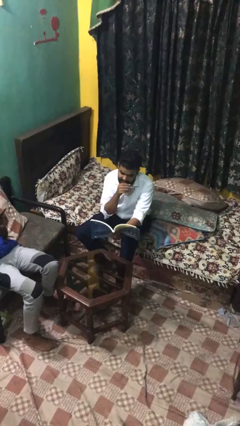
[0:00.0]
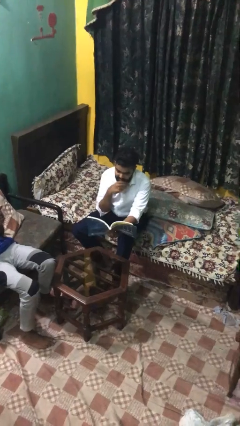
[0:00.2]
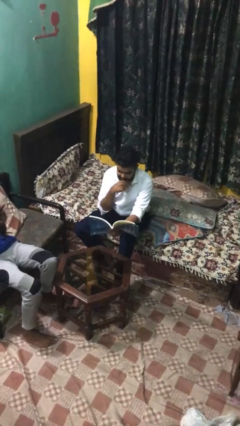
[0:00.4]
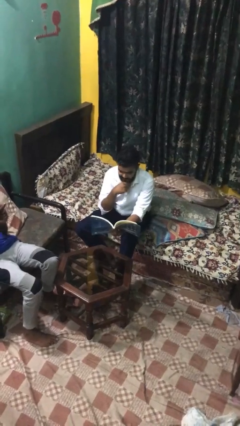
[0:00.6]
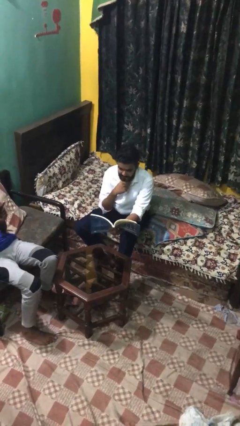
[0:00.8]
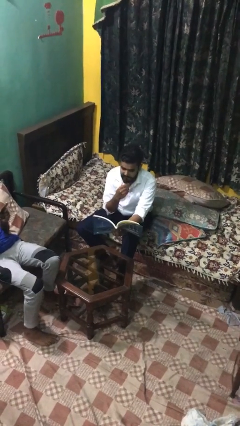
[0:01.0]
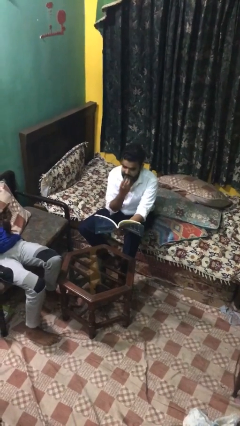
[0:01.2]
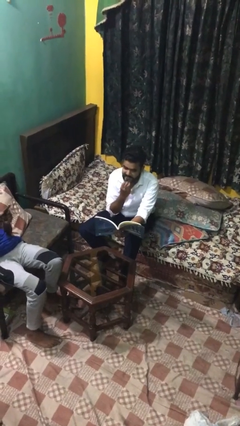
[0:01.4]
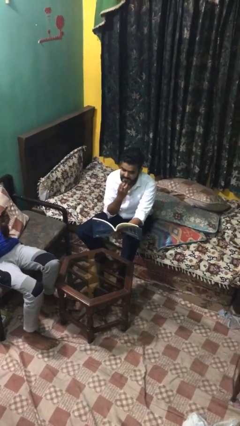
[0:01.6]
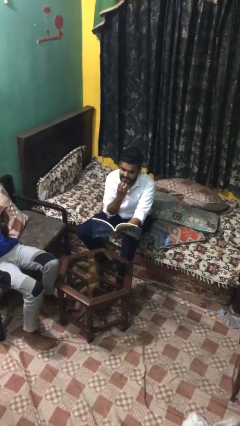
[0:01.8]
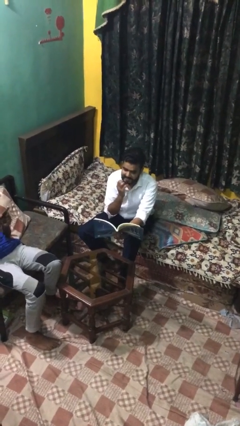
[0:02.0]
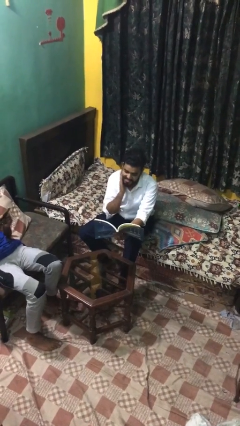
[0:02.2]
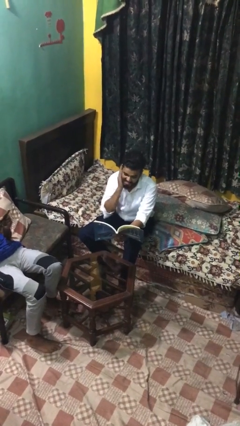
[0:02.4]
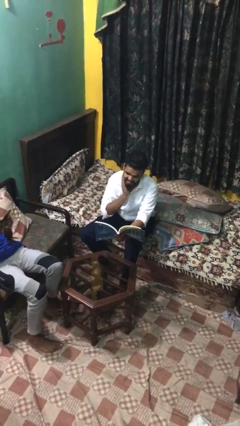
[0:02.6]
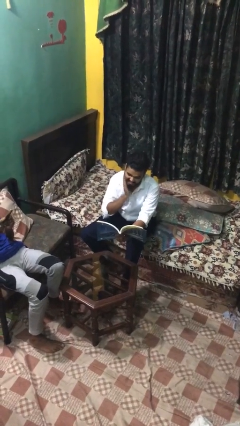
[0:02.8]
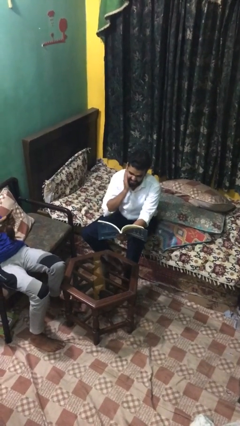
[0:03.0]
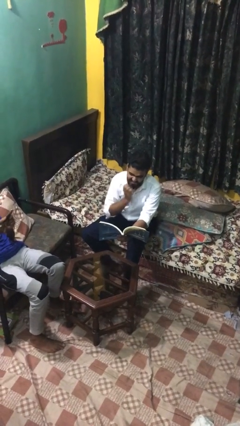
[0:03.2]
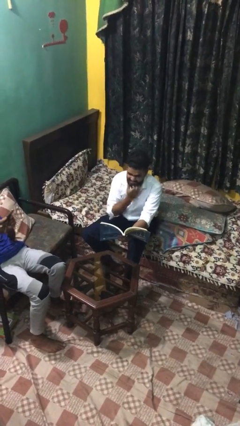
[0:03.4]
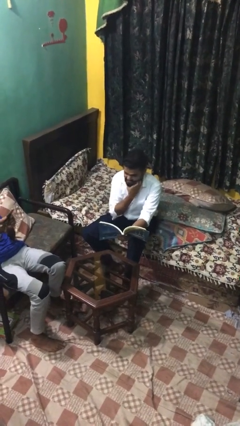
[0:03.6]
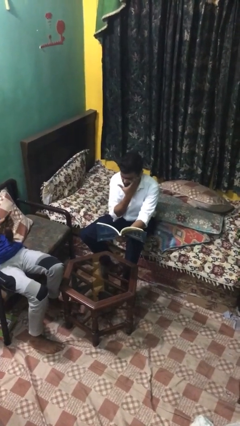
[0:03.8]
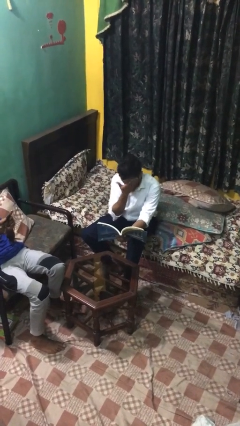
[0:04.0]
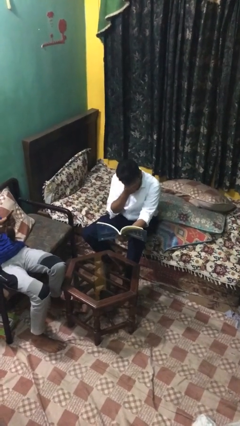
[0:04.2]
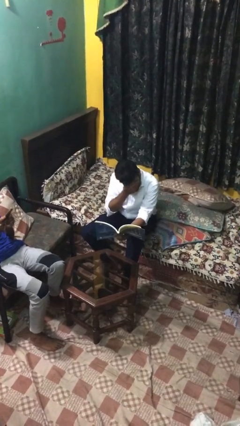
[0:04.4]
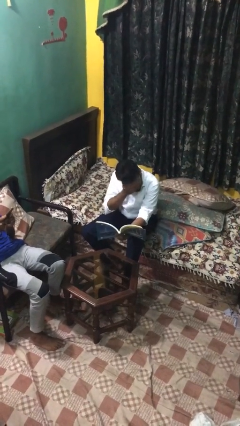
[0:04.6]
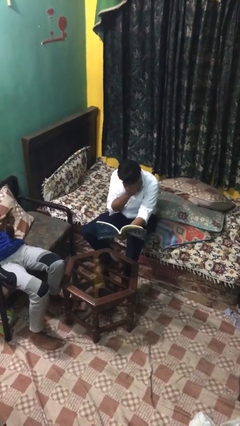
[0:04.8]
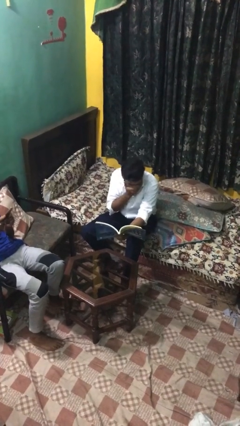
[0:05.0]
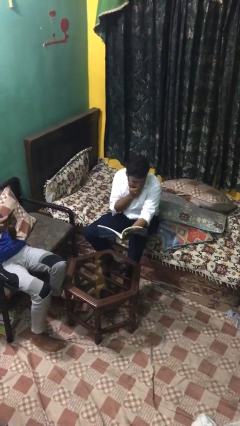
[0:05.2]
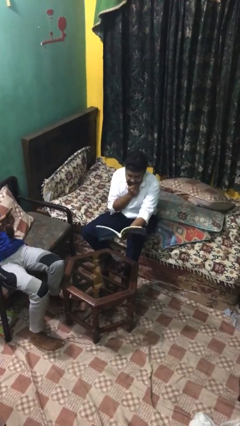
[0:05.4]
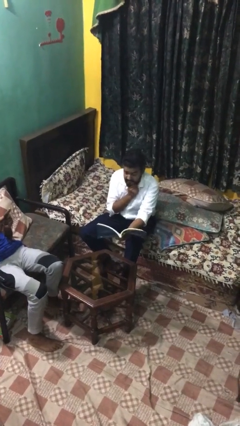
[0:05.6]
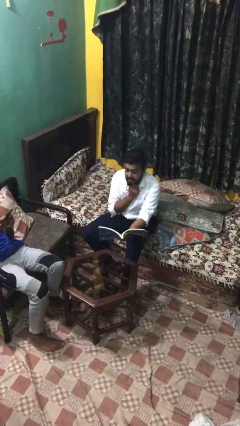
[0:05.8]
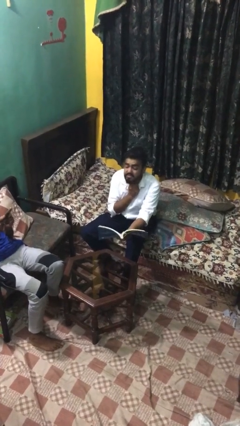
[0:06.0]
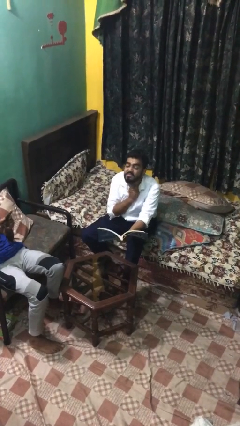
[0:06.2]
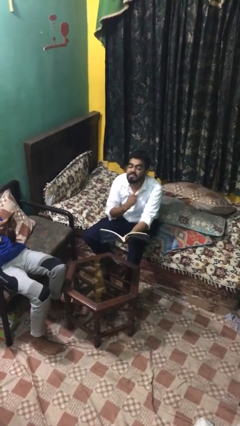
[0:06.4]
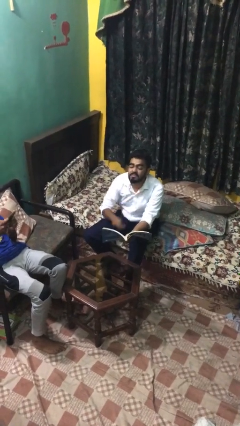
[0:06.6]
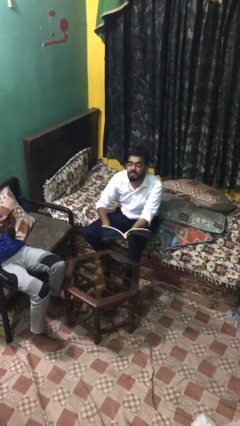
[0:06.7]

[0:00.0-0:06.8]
person reads document

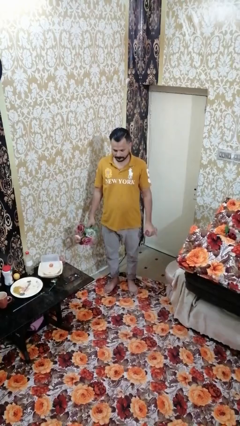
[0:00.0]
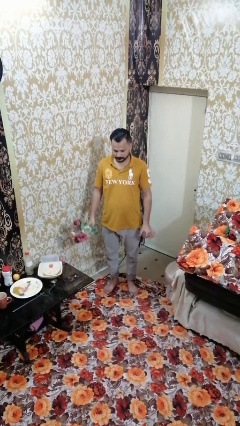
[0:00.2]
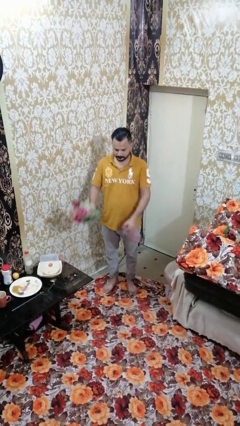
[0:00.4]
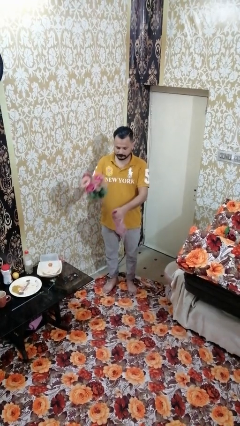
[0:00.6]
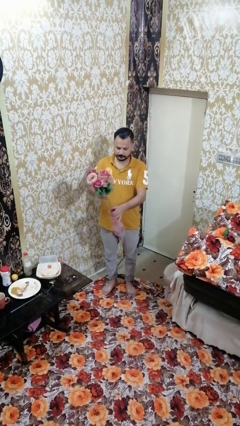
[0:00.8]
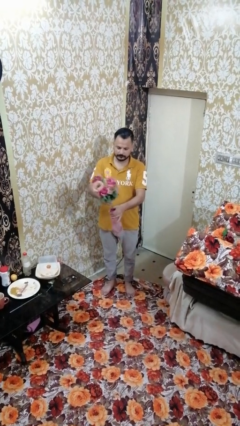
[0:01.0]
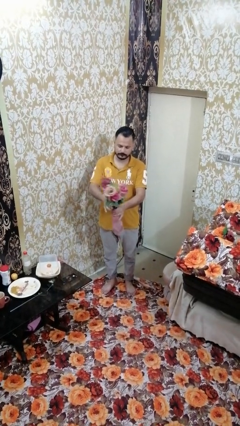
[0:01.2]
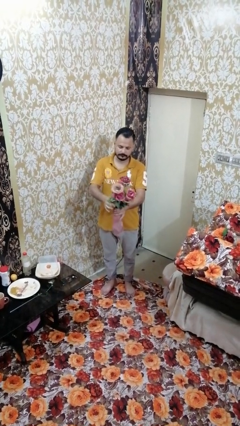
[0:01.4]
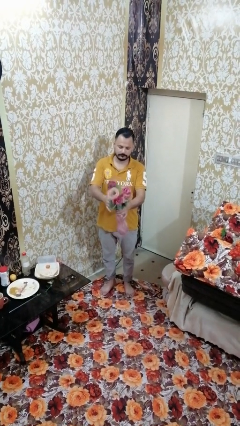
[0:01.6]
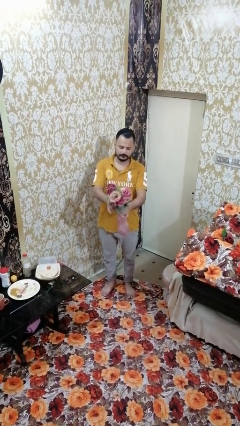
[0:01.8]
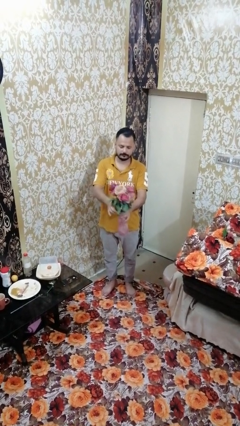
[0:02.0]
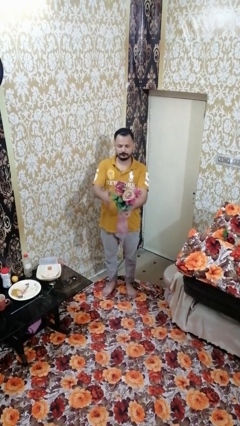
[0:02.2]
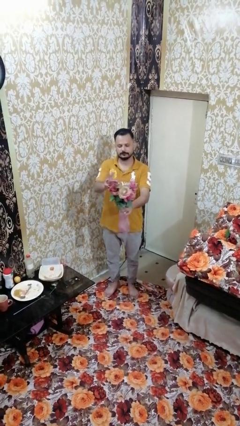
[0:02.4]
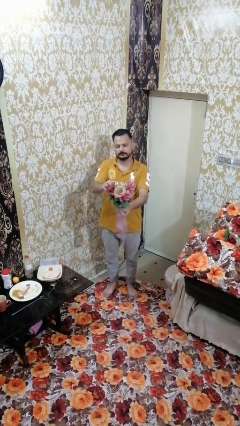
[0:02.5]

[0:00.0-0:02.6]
person arranges flowers in vase

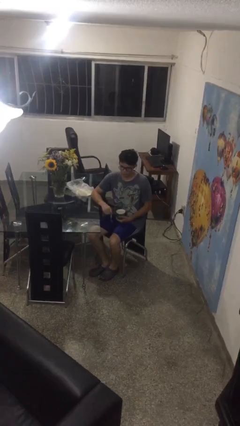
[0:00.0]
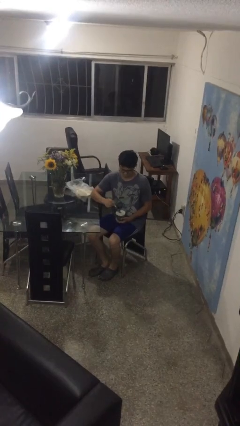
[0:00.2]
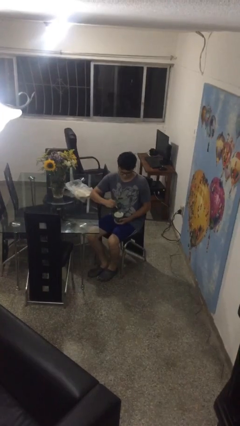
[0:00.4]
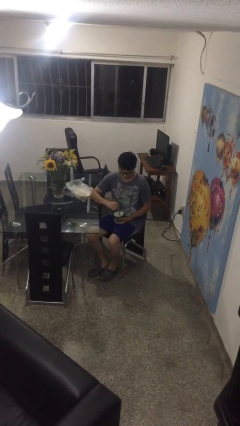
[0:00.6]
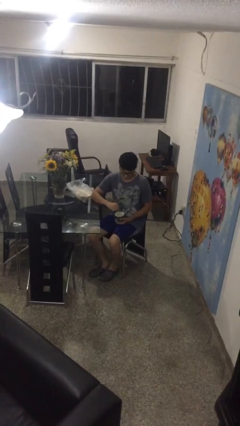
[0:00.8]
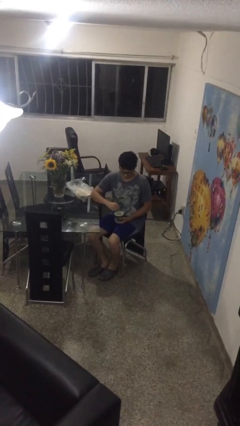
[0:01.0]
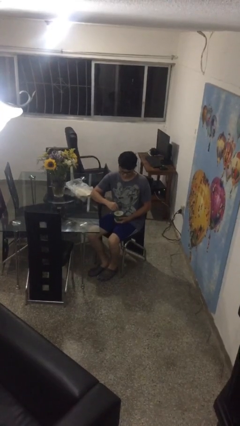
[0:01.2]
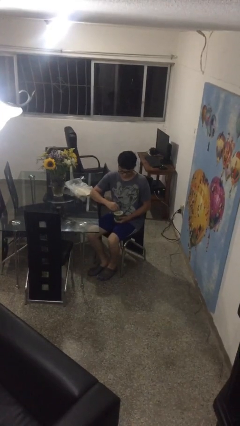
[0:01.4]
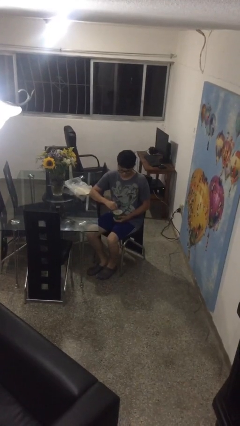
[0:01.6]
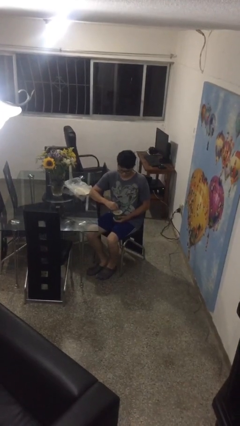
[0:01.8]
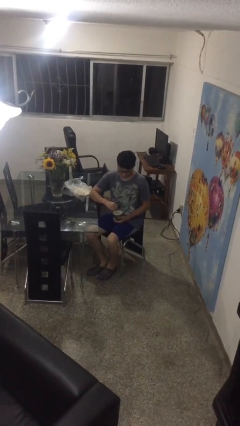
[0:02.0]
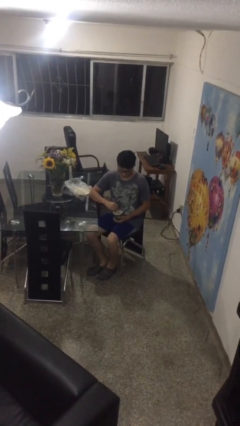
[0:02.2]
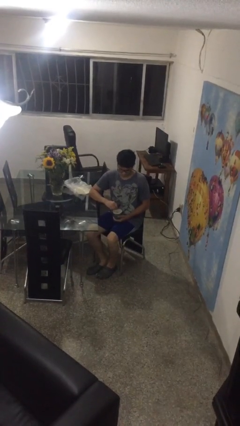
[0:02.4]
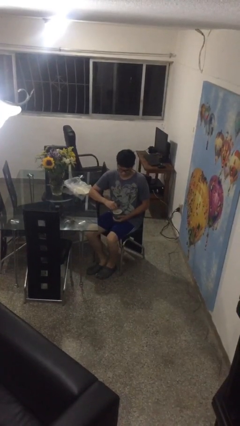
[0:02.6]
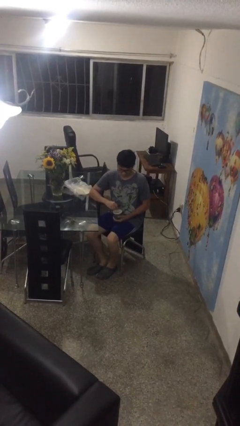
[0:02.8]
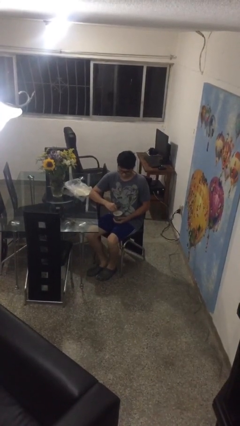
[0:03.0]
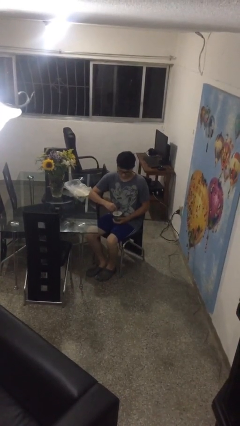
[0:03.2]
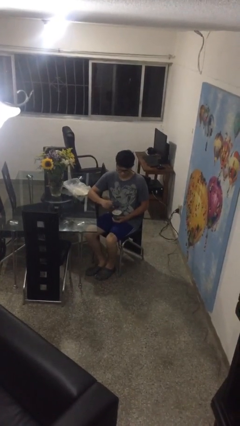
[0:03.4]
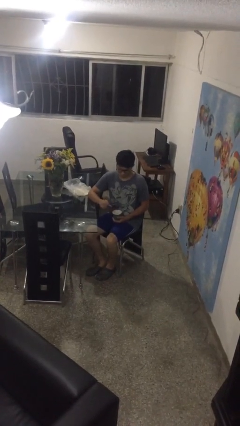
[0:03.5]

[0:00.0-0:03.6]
person stirs mug

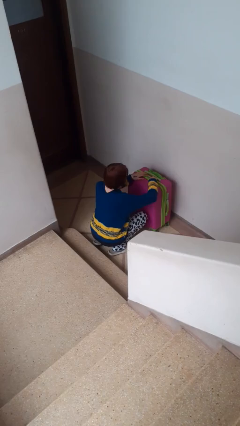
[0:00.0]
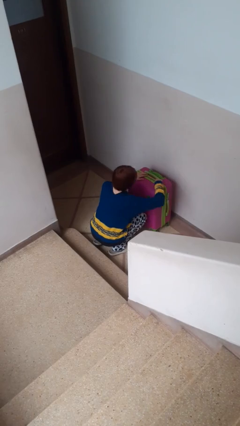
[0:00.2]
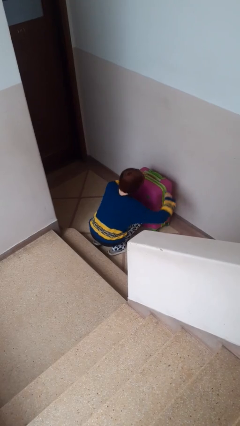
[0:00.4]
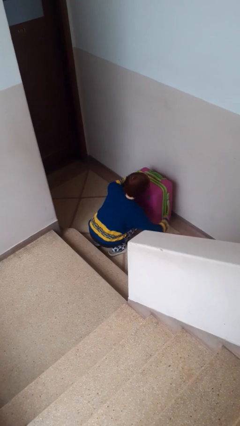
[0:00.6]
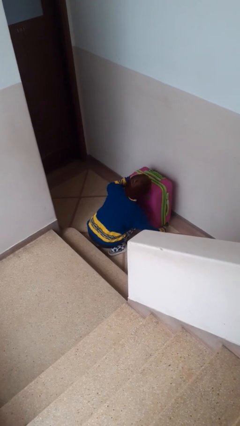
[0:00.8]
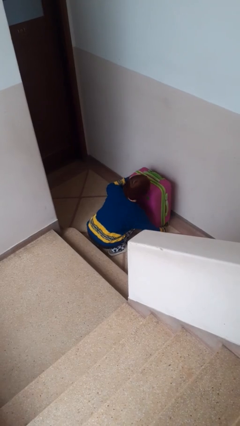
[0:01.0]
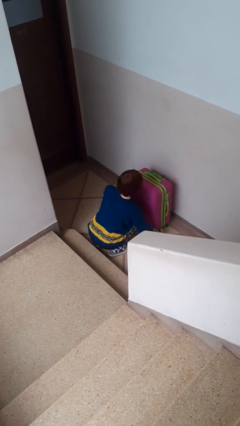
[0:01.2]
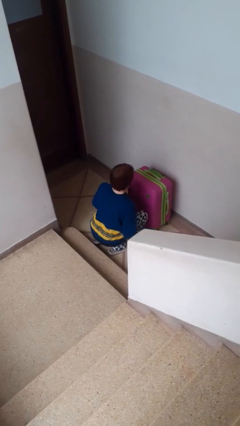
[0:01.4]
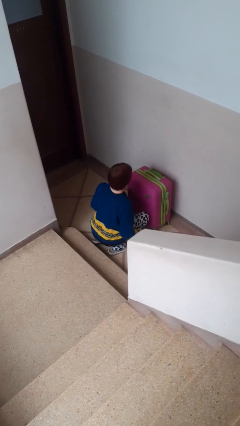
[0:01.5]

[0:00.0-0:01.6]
person opens suitcase

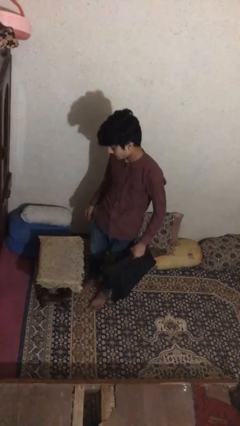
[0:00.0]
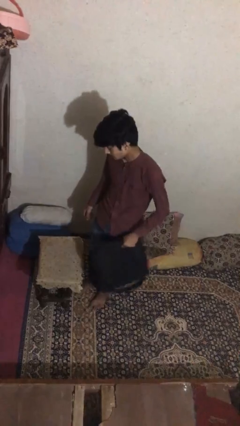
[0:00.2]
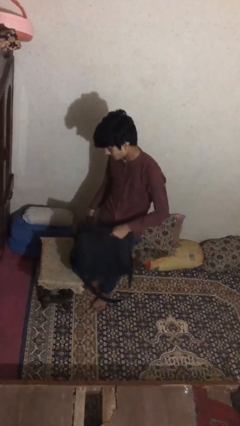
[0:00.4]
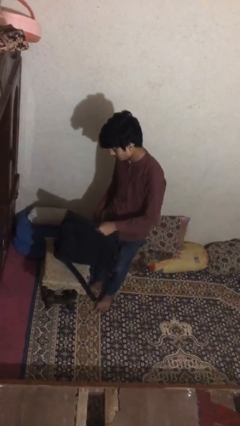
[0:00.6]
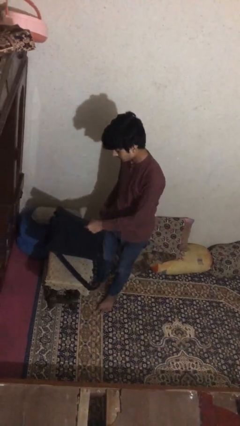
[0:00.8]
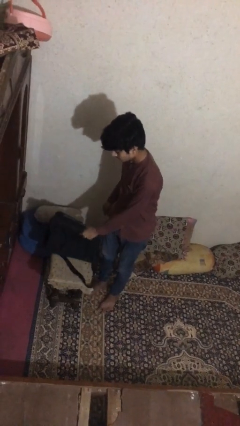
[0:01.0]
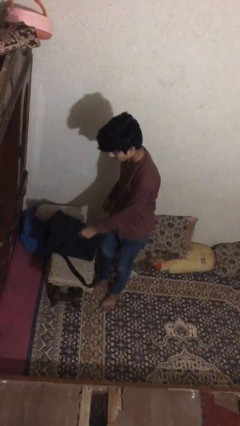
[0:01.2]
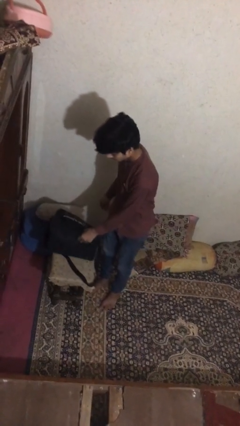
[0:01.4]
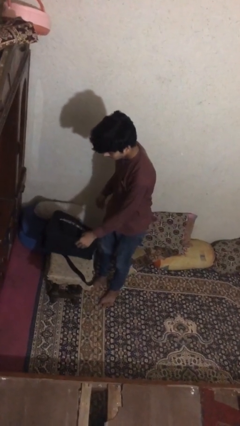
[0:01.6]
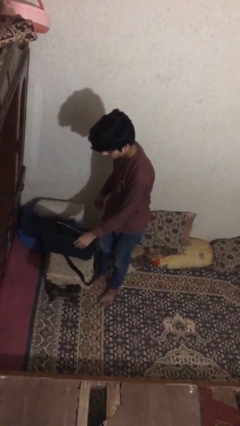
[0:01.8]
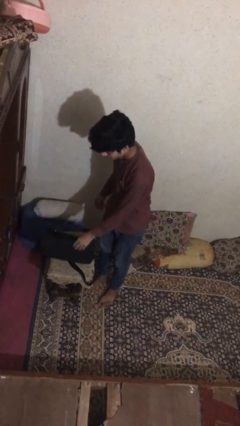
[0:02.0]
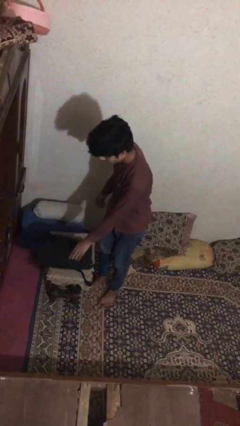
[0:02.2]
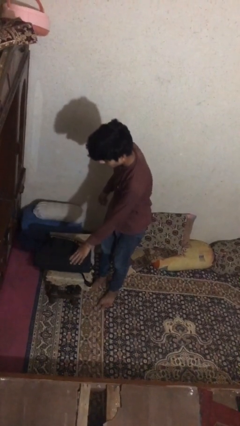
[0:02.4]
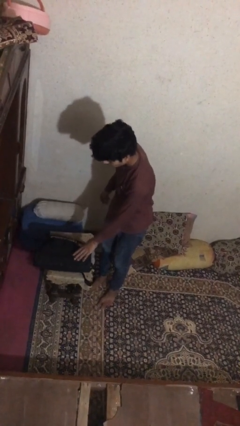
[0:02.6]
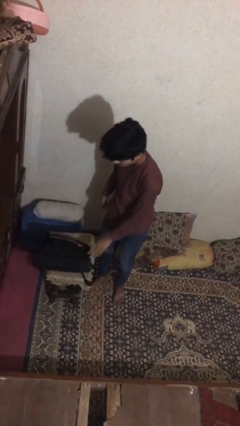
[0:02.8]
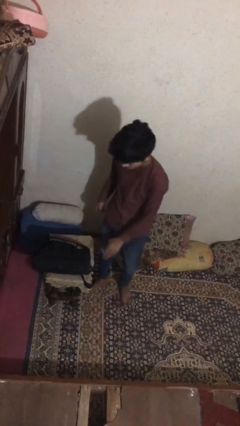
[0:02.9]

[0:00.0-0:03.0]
person puts down object on table

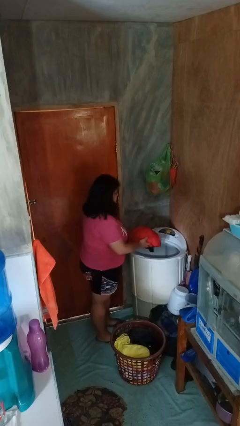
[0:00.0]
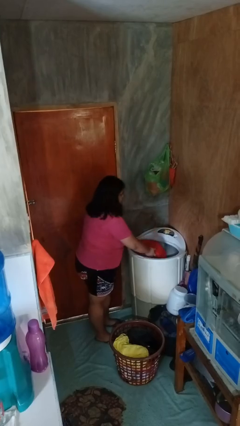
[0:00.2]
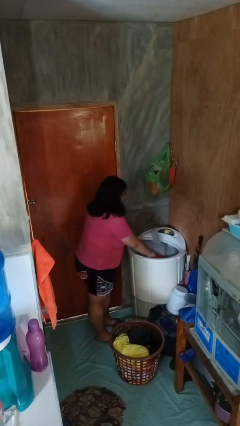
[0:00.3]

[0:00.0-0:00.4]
person loads dryer
